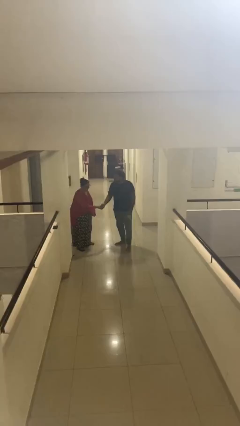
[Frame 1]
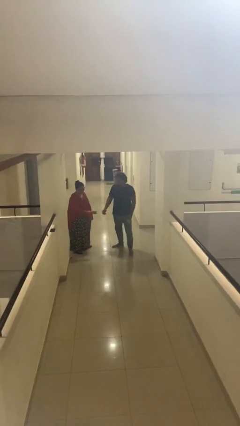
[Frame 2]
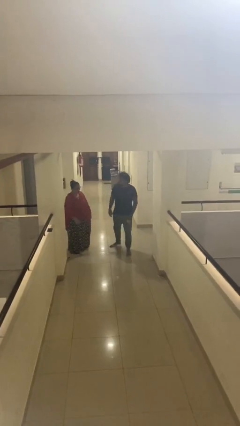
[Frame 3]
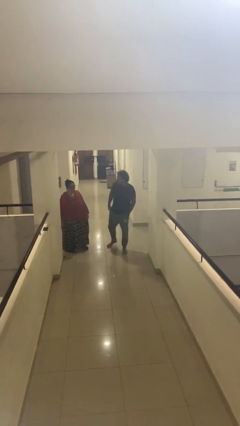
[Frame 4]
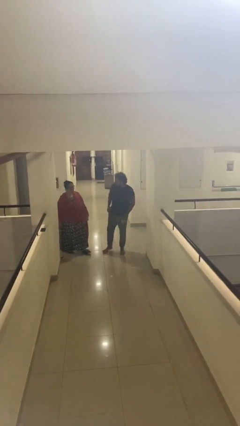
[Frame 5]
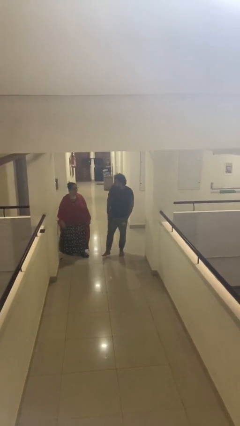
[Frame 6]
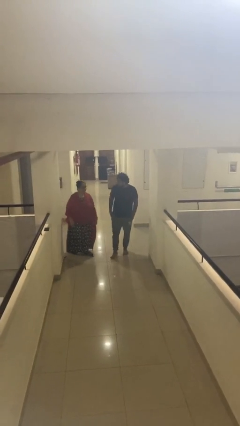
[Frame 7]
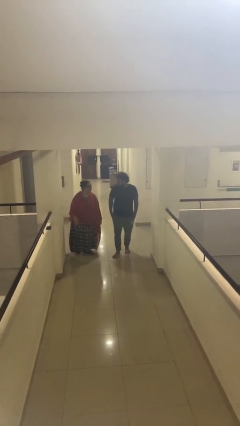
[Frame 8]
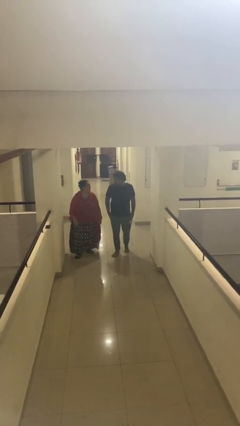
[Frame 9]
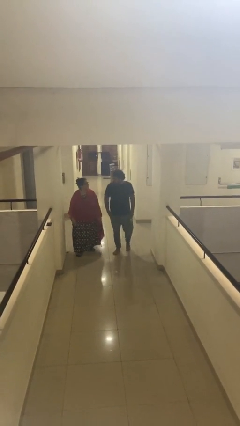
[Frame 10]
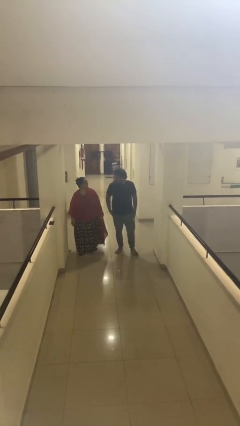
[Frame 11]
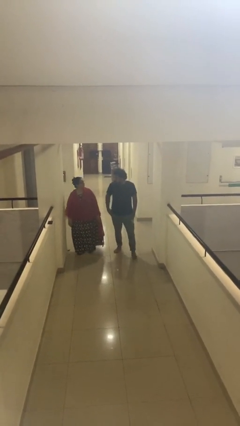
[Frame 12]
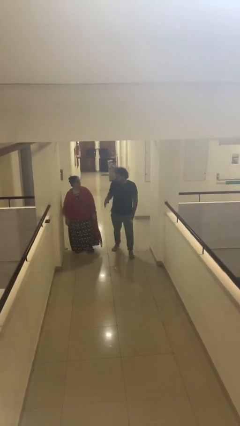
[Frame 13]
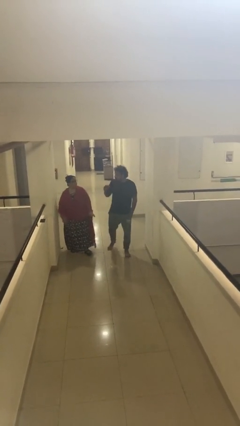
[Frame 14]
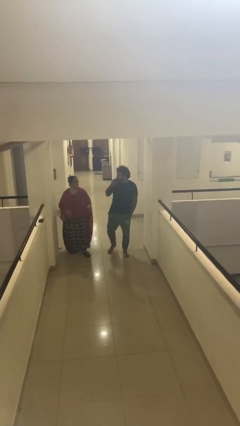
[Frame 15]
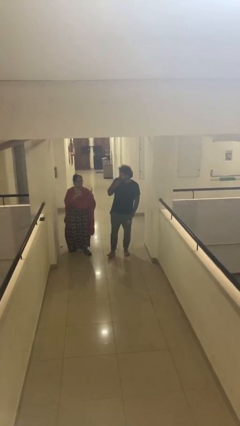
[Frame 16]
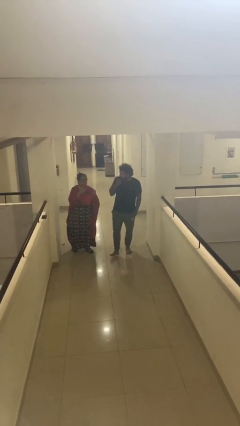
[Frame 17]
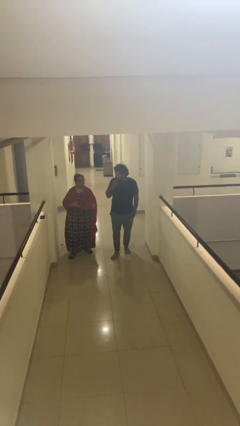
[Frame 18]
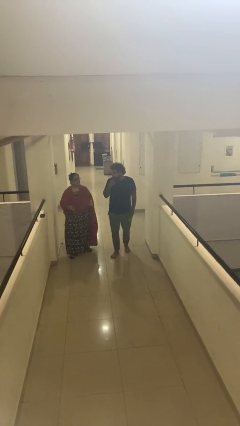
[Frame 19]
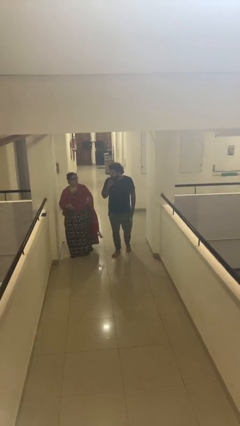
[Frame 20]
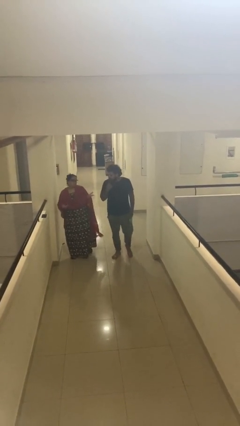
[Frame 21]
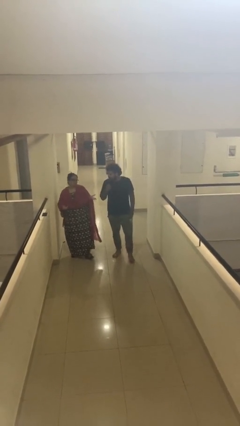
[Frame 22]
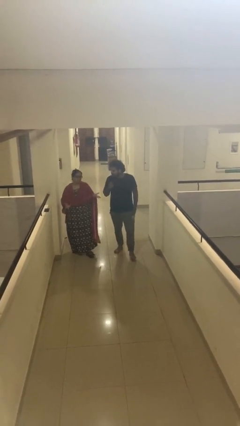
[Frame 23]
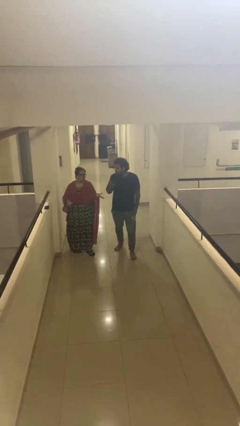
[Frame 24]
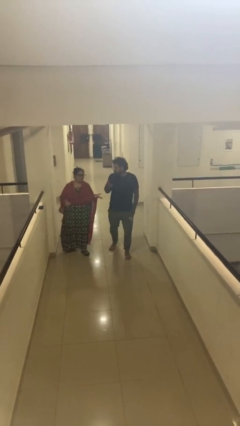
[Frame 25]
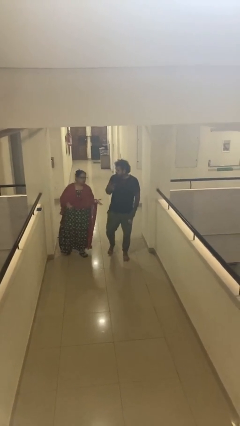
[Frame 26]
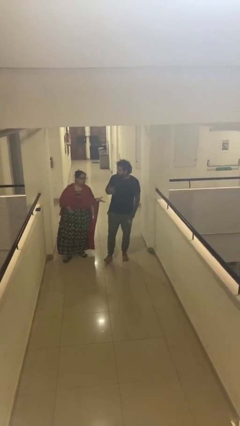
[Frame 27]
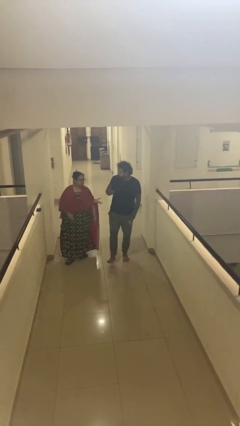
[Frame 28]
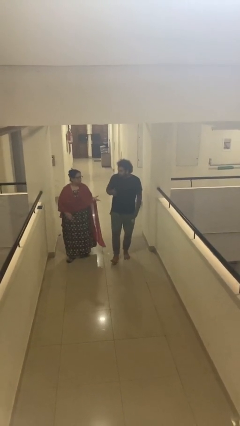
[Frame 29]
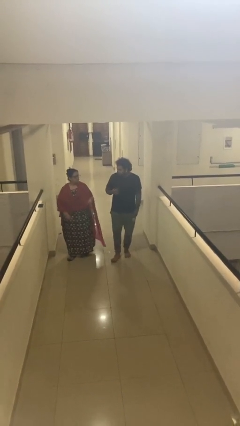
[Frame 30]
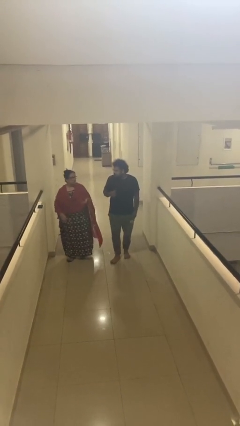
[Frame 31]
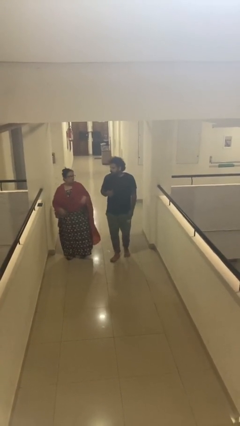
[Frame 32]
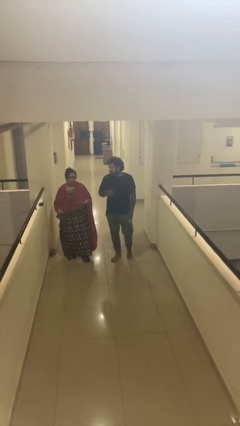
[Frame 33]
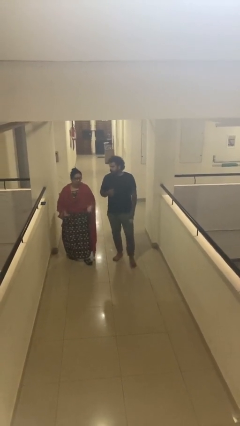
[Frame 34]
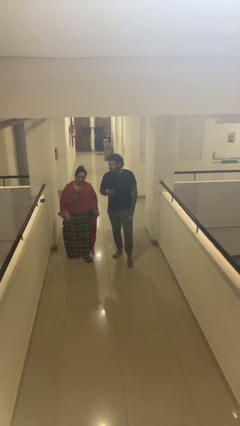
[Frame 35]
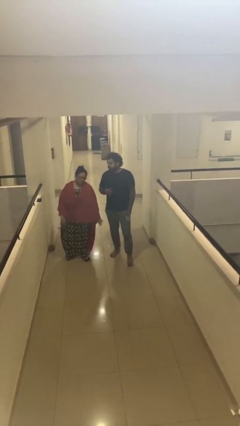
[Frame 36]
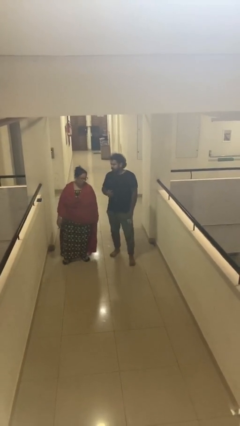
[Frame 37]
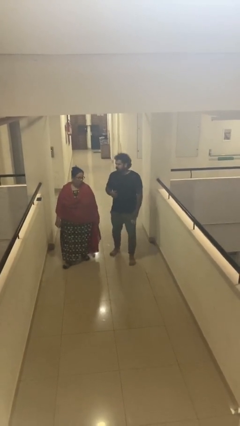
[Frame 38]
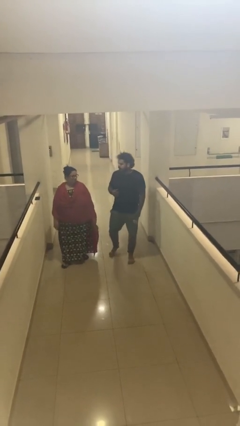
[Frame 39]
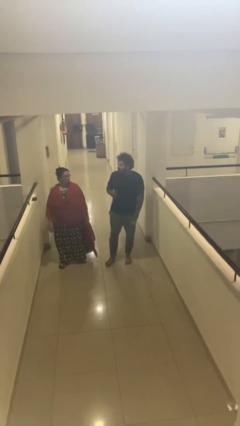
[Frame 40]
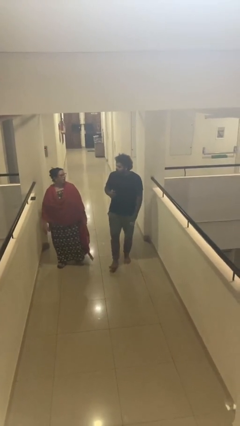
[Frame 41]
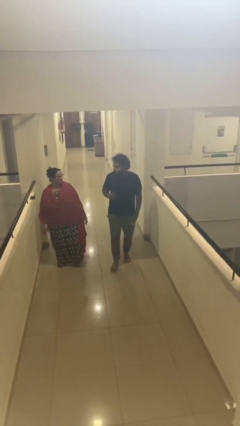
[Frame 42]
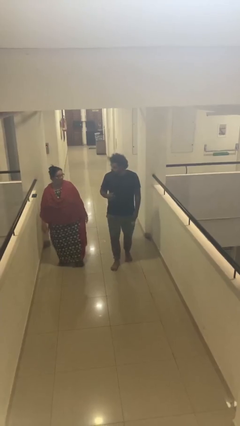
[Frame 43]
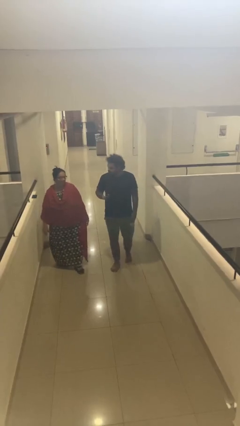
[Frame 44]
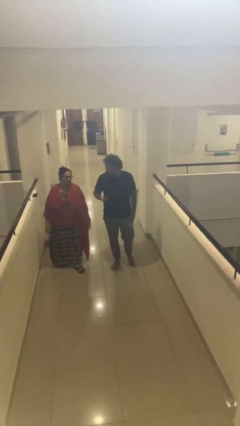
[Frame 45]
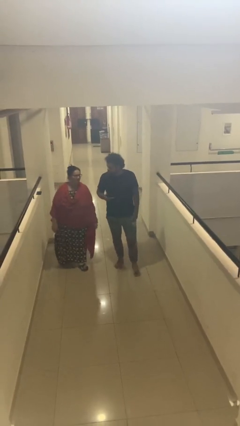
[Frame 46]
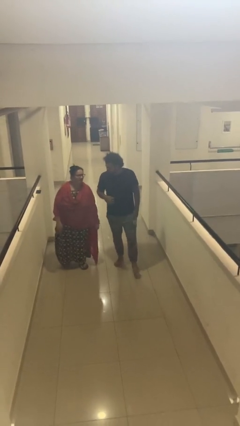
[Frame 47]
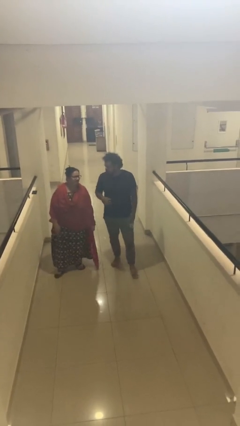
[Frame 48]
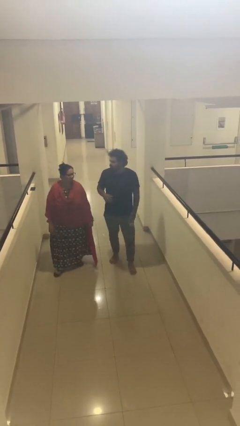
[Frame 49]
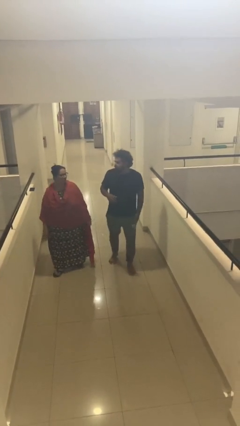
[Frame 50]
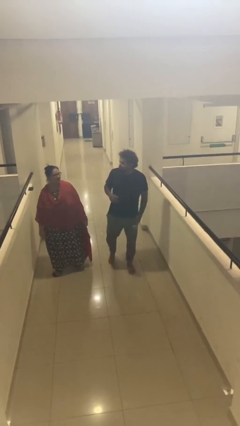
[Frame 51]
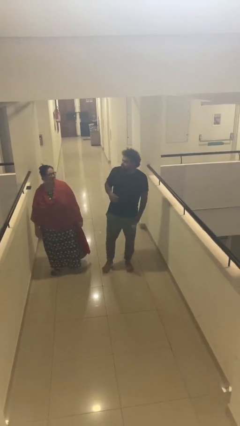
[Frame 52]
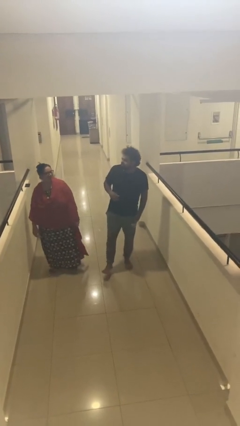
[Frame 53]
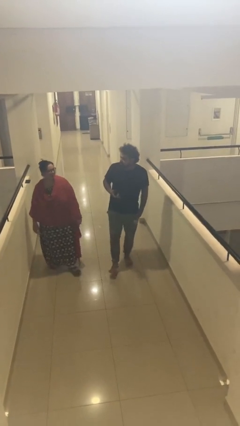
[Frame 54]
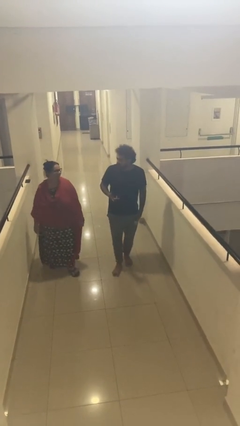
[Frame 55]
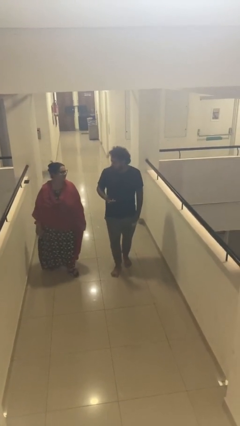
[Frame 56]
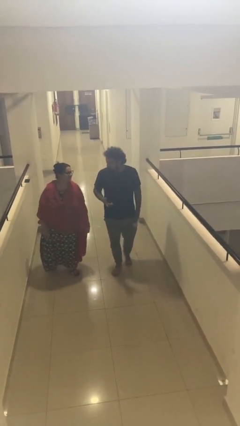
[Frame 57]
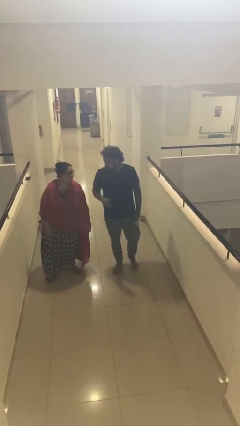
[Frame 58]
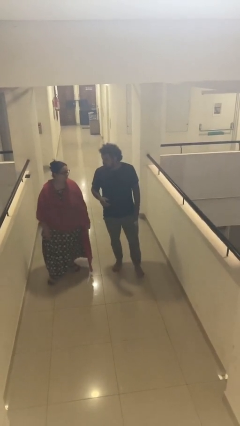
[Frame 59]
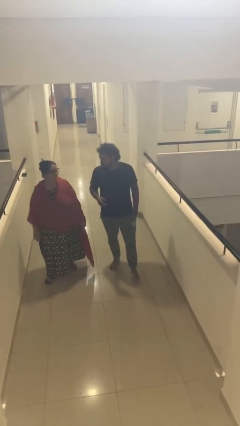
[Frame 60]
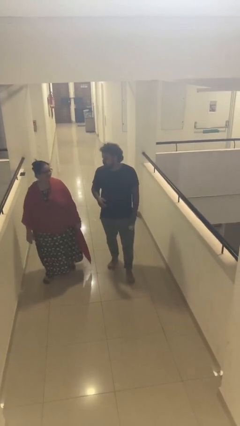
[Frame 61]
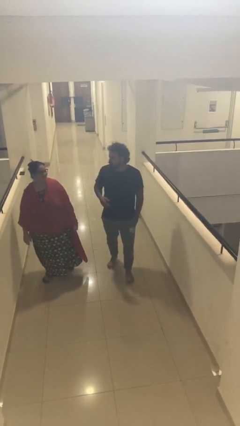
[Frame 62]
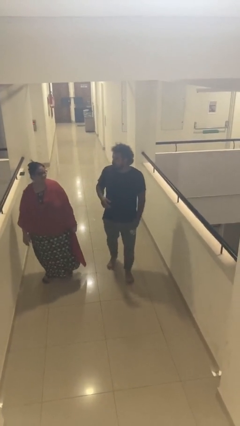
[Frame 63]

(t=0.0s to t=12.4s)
person talks to person

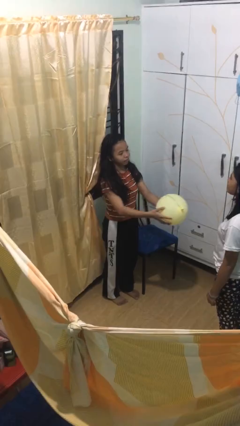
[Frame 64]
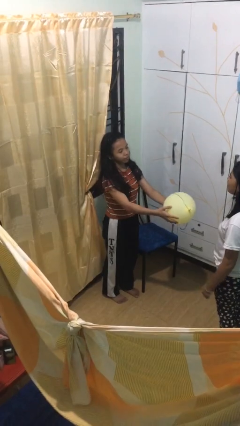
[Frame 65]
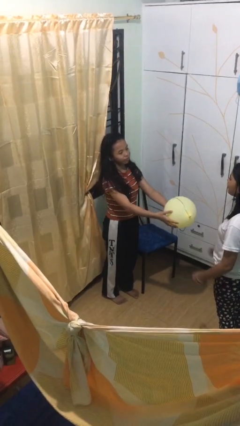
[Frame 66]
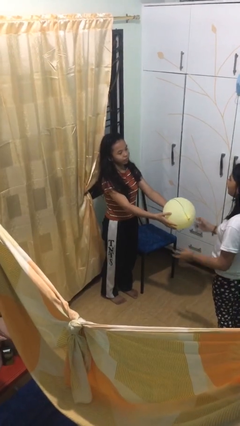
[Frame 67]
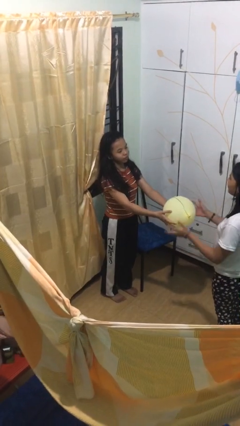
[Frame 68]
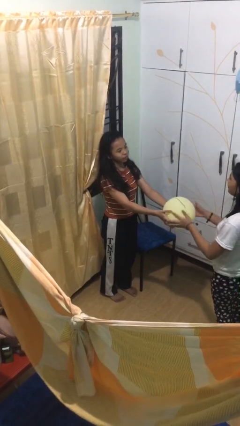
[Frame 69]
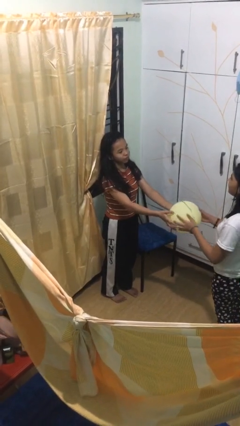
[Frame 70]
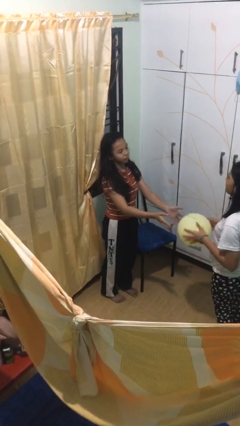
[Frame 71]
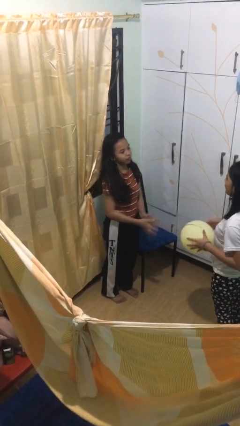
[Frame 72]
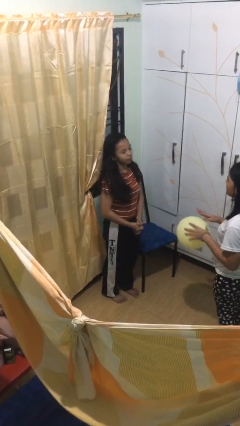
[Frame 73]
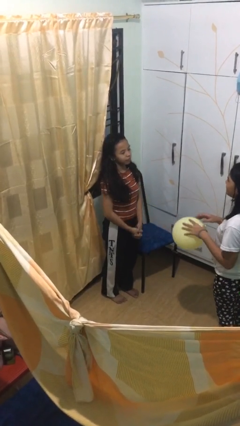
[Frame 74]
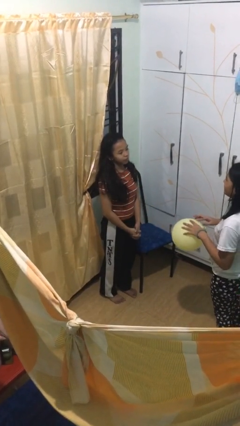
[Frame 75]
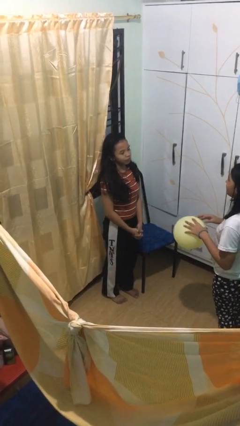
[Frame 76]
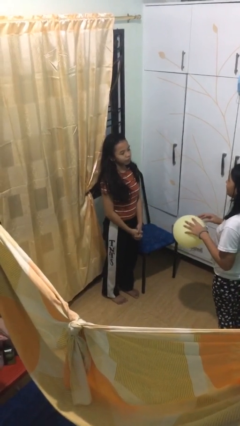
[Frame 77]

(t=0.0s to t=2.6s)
person transfers object to person

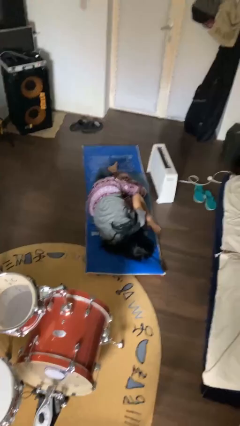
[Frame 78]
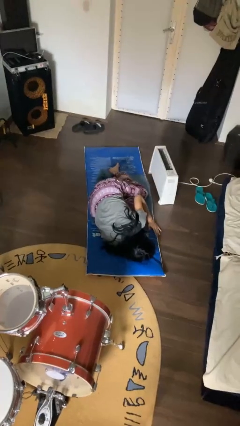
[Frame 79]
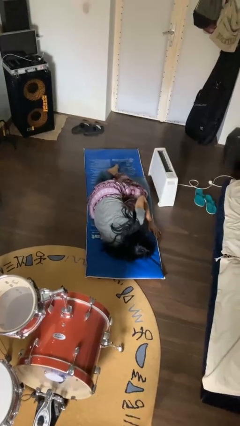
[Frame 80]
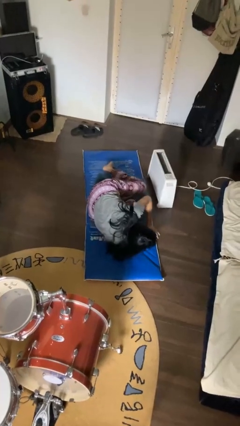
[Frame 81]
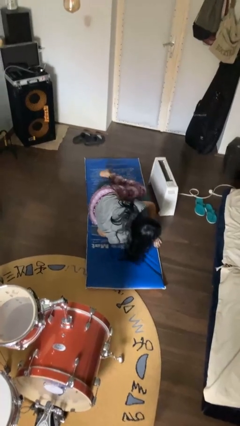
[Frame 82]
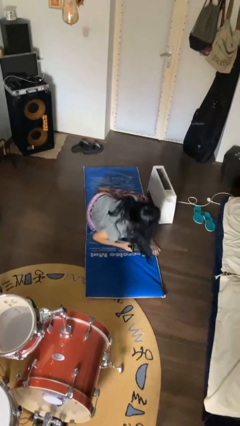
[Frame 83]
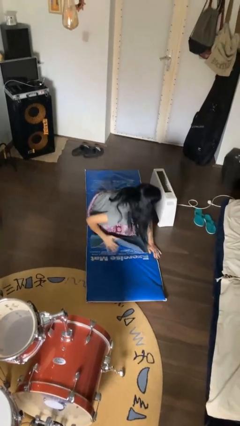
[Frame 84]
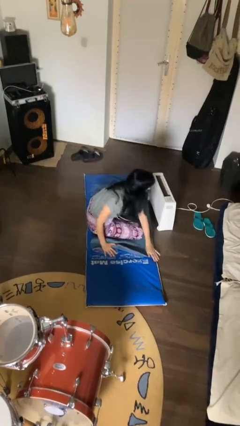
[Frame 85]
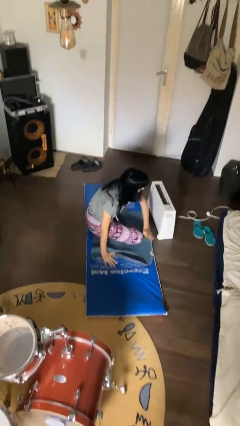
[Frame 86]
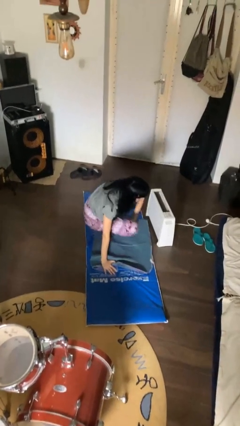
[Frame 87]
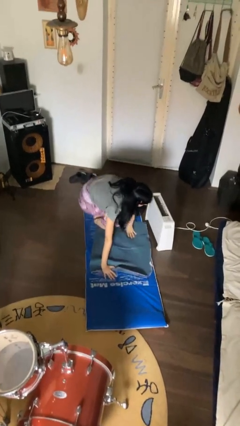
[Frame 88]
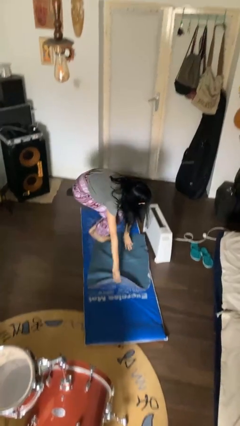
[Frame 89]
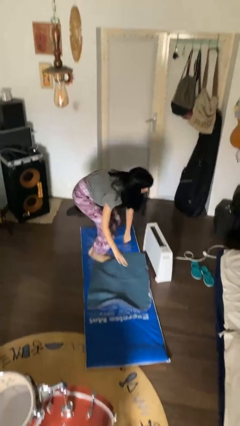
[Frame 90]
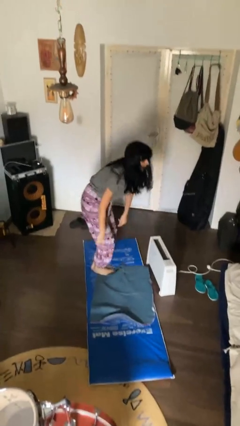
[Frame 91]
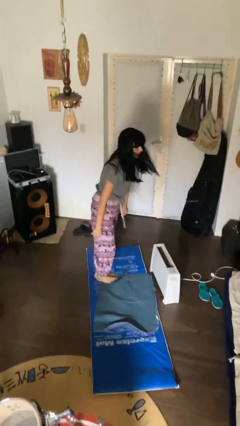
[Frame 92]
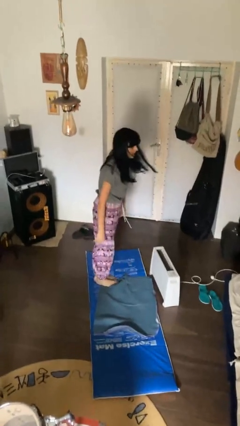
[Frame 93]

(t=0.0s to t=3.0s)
person stands up from floor

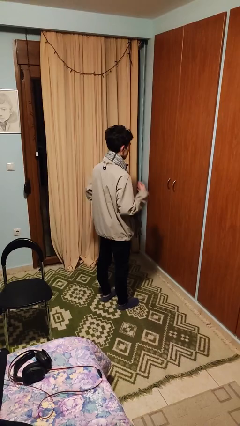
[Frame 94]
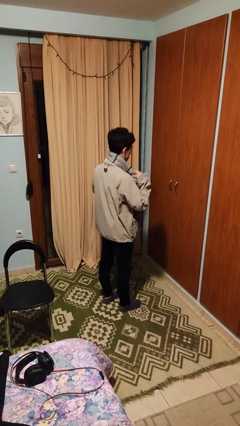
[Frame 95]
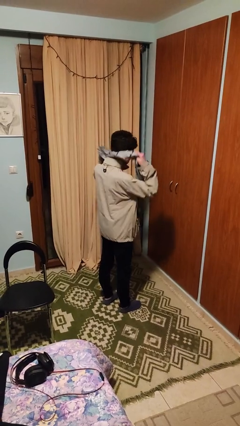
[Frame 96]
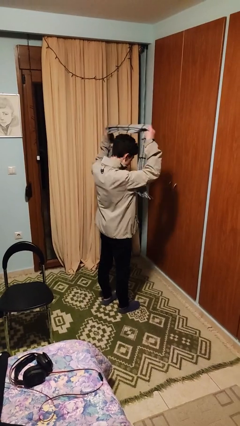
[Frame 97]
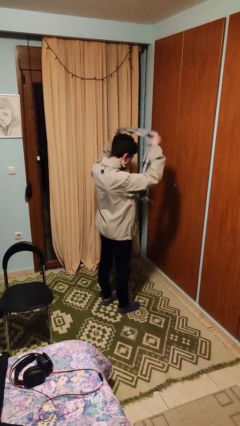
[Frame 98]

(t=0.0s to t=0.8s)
person takes off scarf
